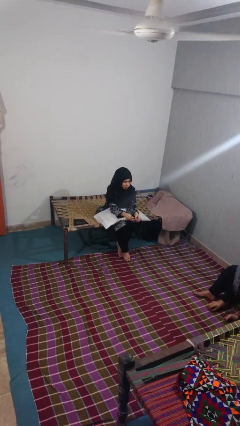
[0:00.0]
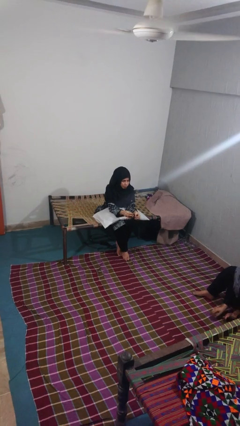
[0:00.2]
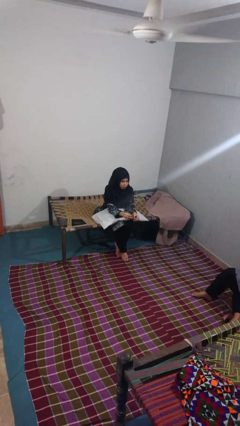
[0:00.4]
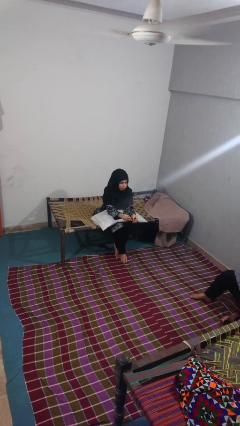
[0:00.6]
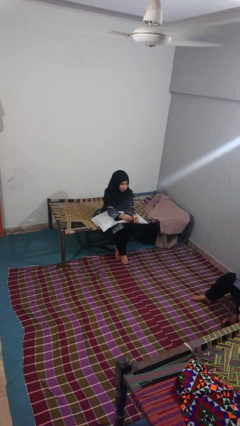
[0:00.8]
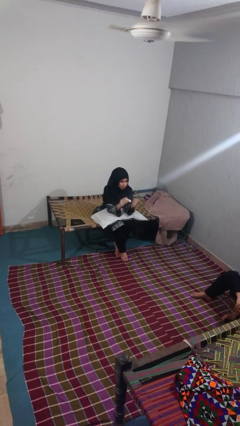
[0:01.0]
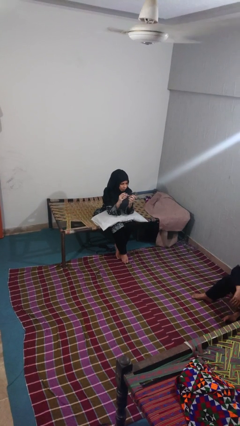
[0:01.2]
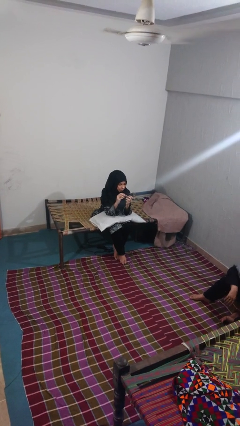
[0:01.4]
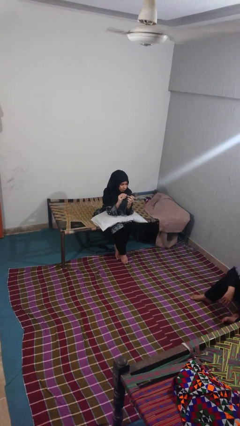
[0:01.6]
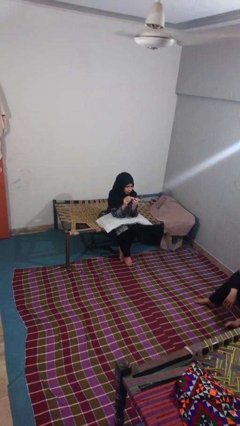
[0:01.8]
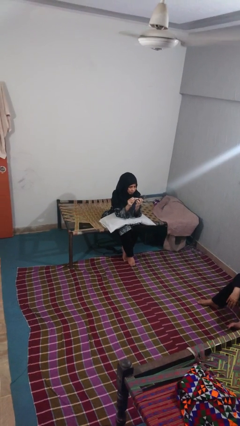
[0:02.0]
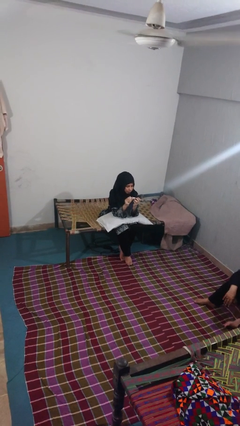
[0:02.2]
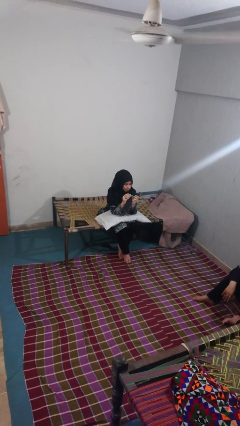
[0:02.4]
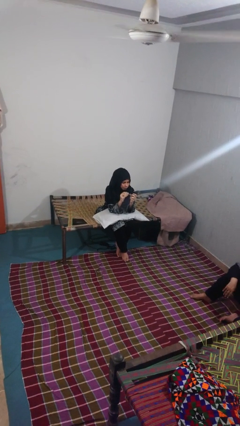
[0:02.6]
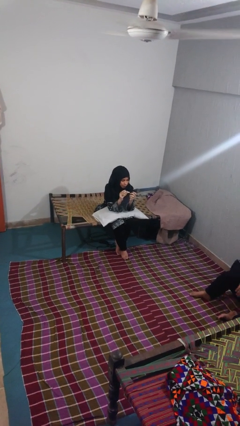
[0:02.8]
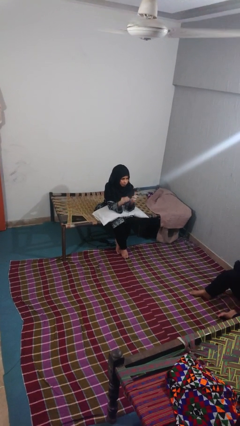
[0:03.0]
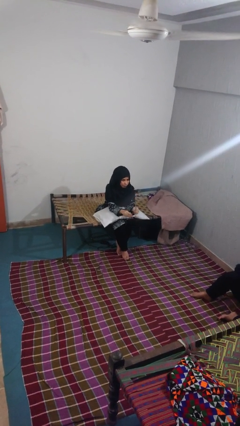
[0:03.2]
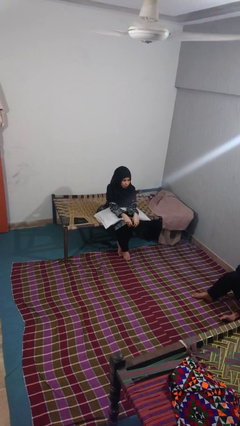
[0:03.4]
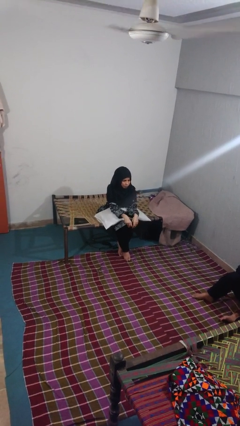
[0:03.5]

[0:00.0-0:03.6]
person clips fingernails

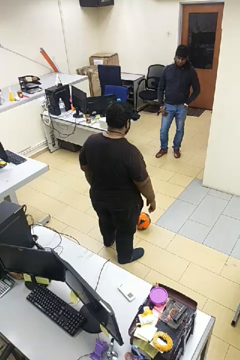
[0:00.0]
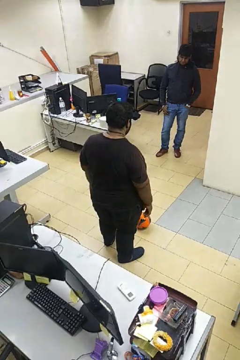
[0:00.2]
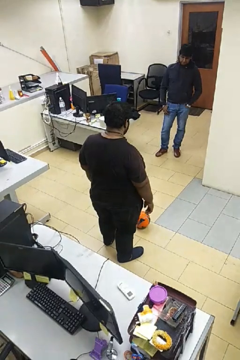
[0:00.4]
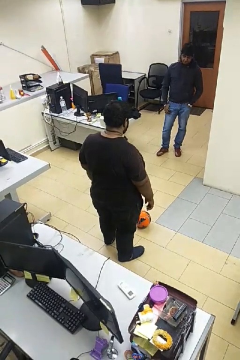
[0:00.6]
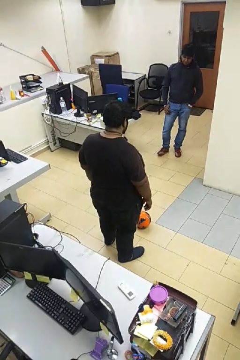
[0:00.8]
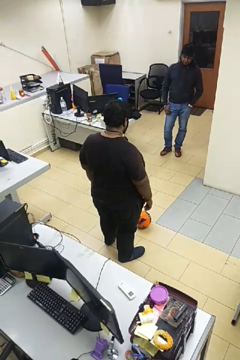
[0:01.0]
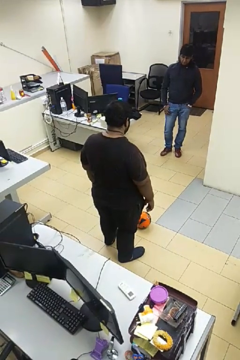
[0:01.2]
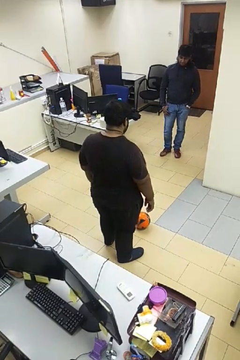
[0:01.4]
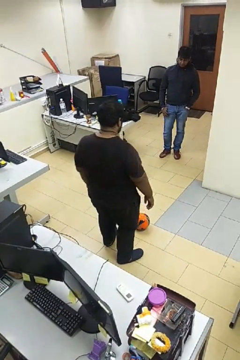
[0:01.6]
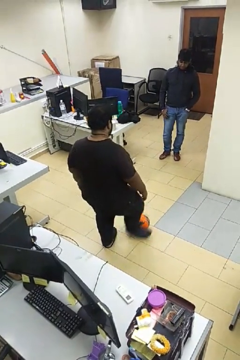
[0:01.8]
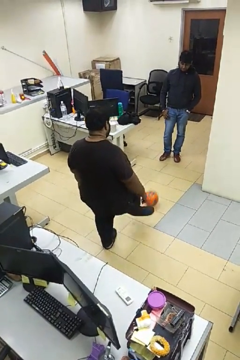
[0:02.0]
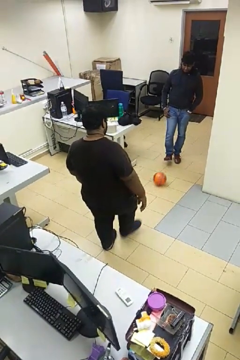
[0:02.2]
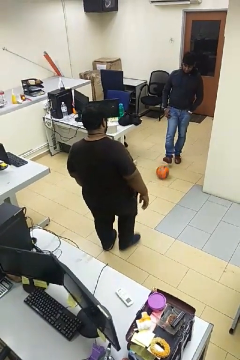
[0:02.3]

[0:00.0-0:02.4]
person kicks object to person

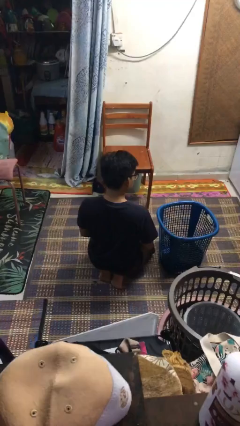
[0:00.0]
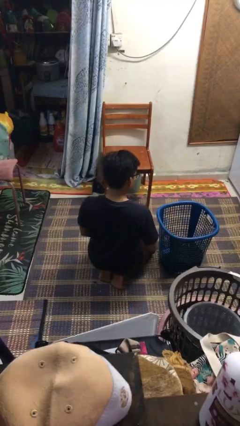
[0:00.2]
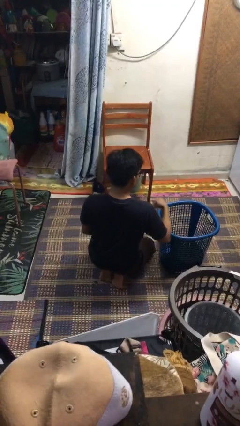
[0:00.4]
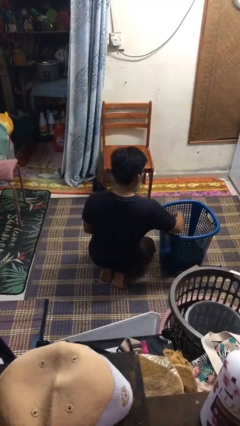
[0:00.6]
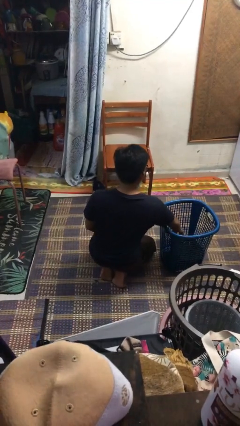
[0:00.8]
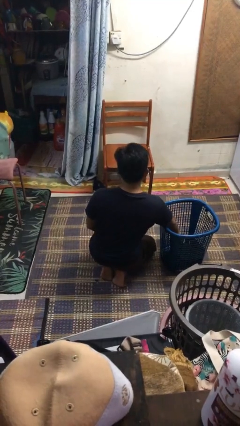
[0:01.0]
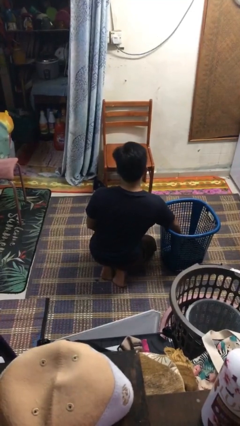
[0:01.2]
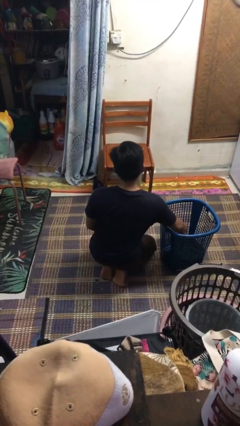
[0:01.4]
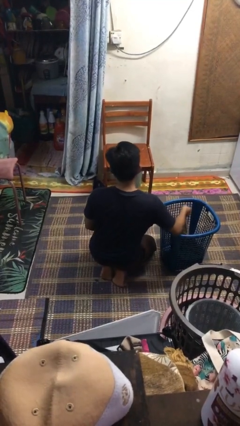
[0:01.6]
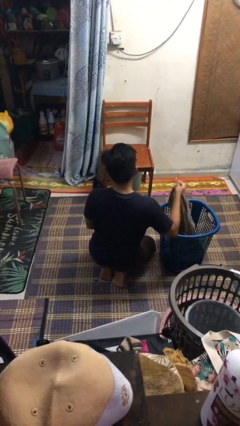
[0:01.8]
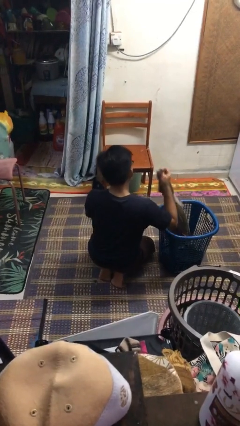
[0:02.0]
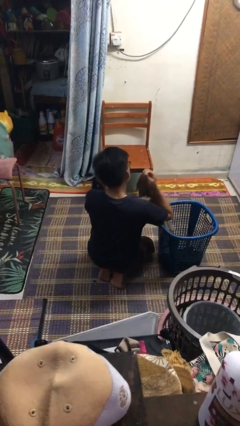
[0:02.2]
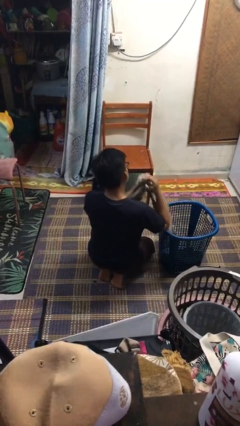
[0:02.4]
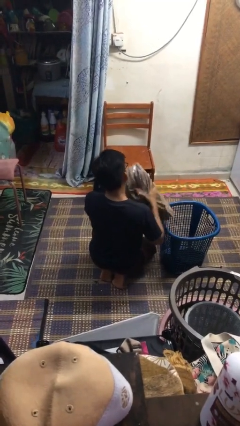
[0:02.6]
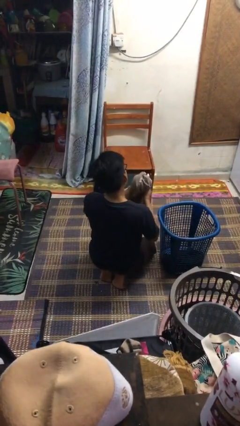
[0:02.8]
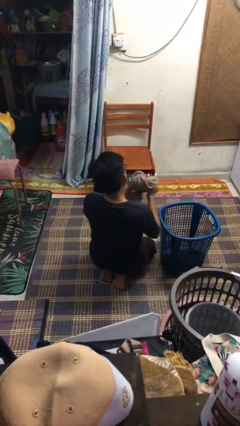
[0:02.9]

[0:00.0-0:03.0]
person takes object from basket

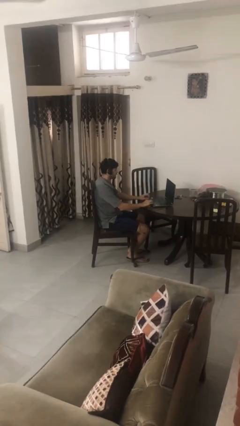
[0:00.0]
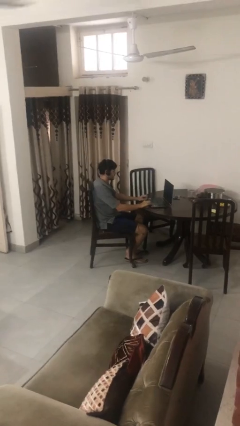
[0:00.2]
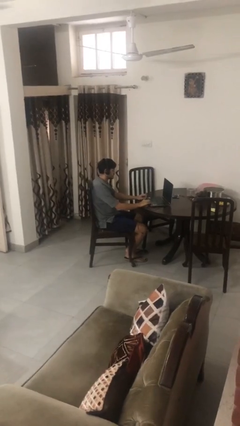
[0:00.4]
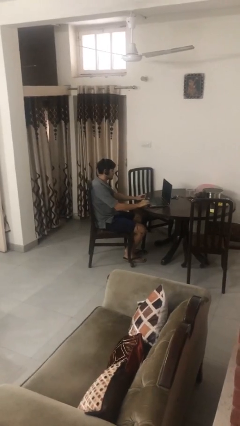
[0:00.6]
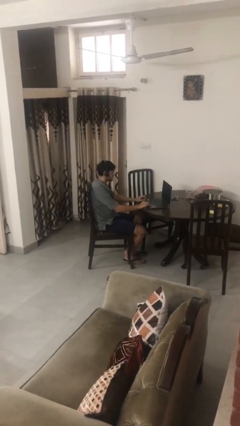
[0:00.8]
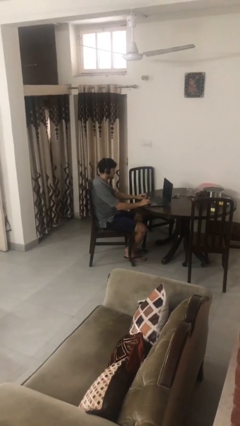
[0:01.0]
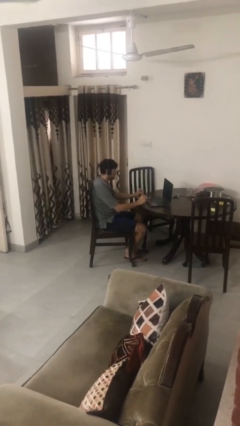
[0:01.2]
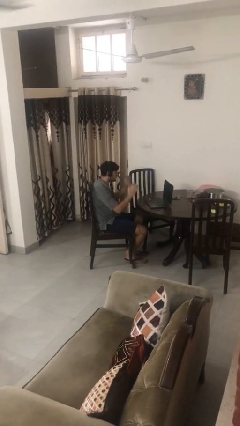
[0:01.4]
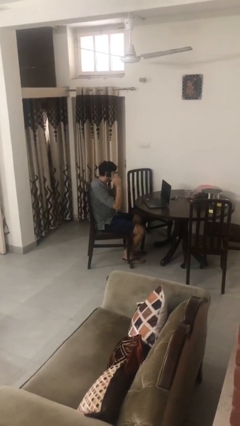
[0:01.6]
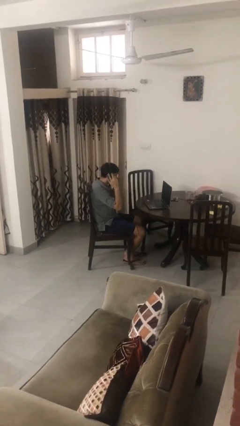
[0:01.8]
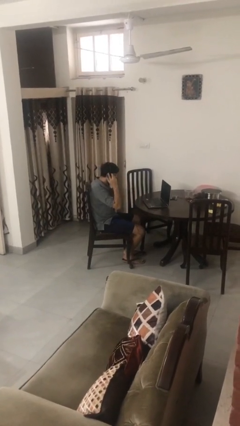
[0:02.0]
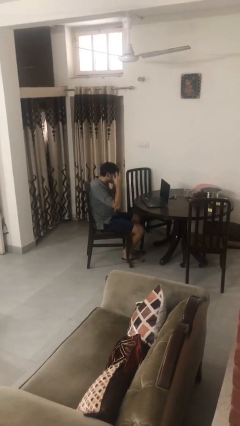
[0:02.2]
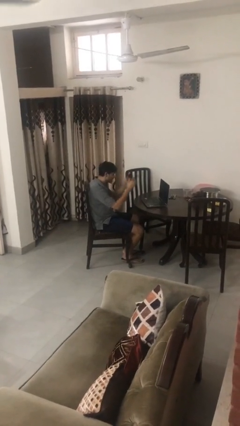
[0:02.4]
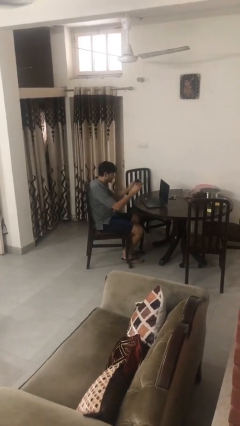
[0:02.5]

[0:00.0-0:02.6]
person takes off headphones

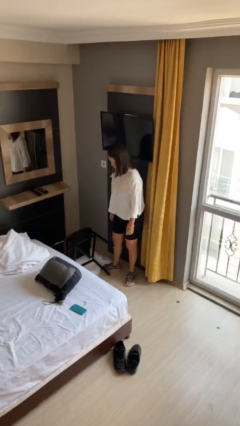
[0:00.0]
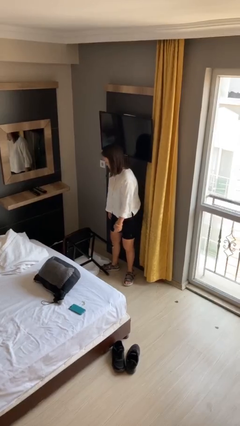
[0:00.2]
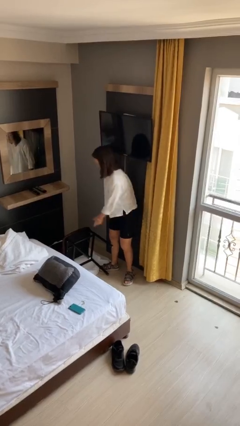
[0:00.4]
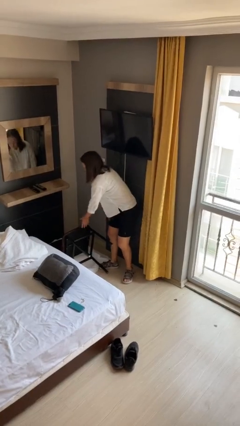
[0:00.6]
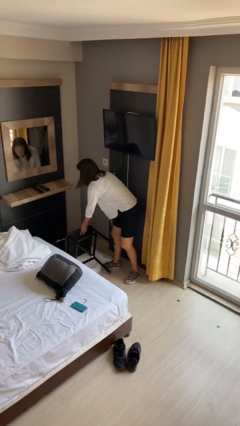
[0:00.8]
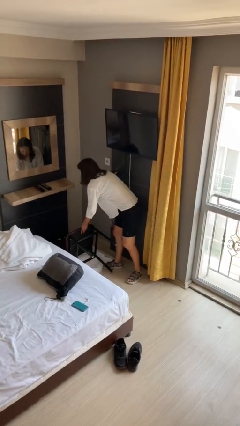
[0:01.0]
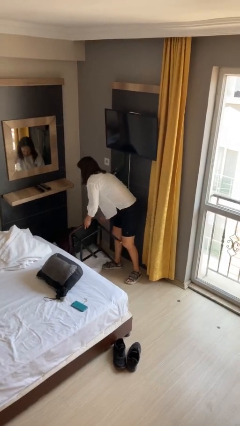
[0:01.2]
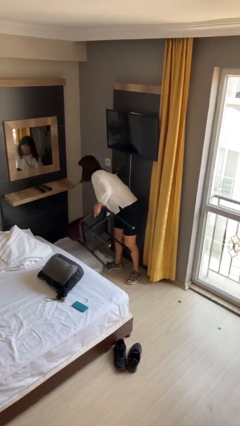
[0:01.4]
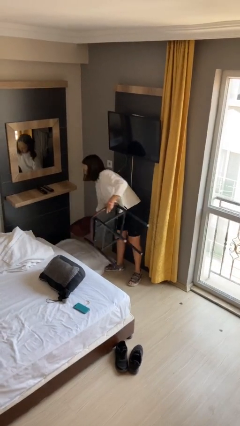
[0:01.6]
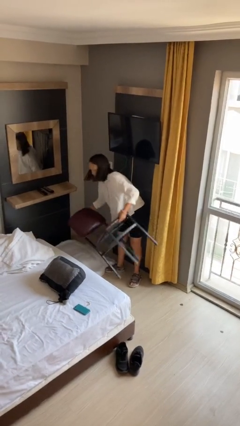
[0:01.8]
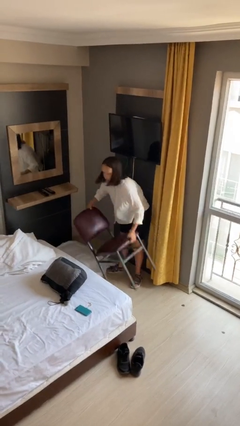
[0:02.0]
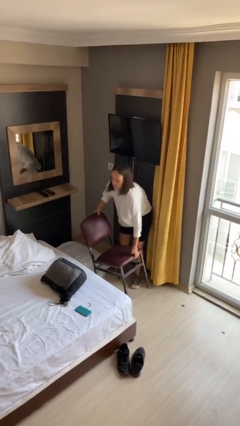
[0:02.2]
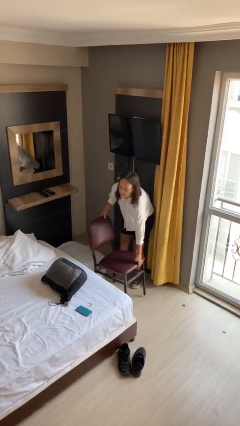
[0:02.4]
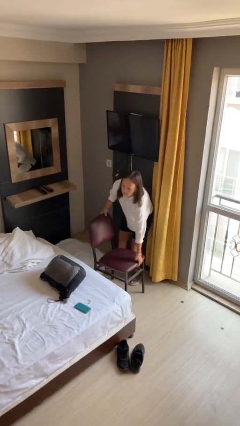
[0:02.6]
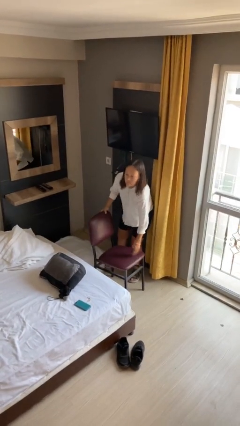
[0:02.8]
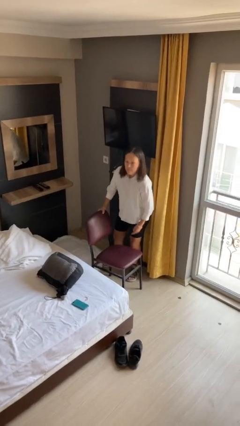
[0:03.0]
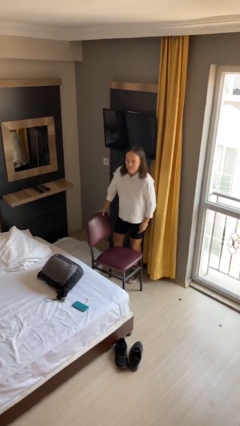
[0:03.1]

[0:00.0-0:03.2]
person sets upright furniture

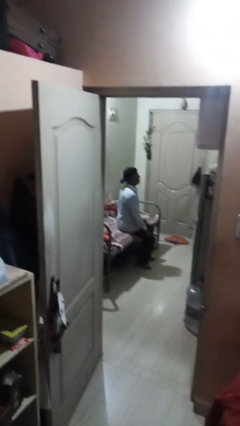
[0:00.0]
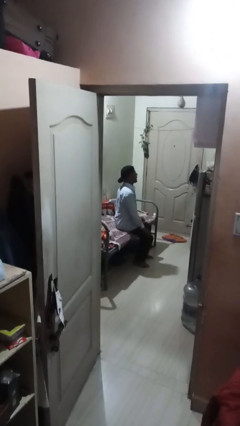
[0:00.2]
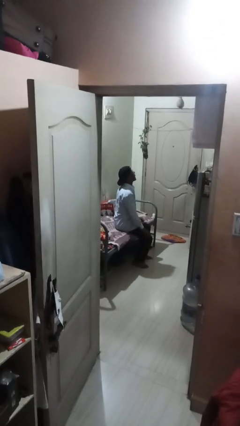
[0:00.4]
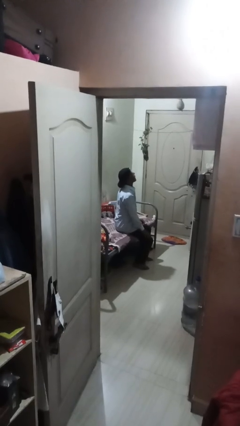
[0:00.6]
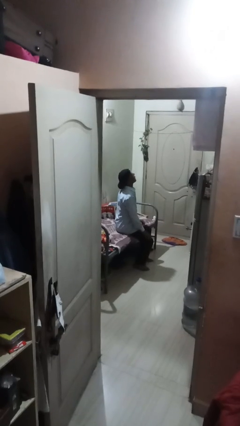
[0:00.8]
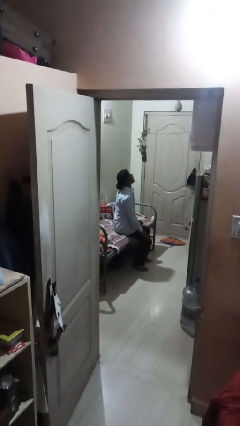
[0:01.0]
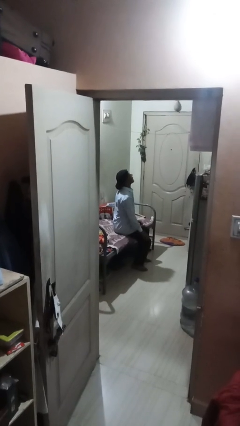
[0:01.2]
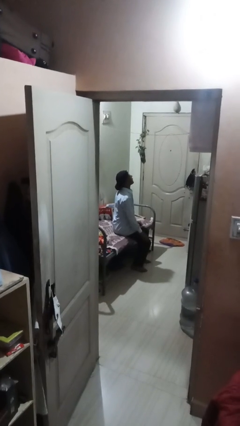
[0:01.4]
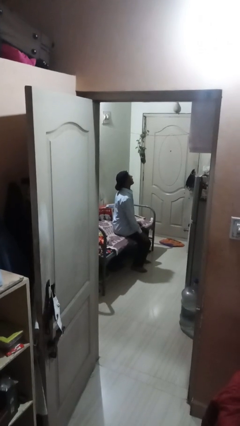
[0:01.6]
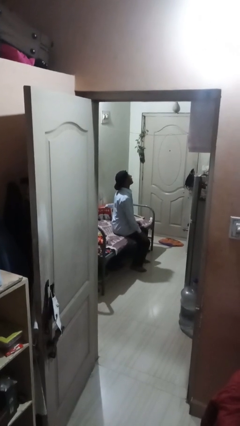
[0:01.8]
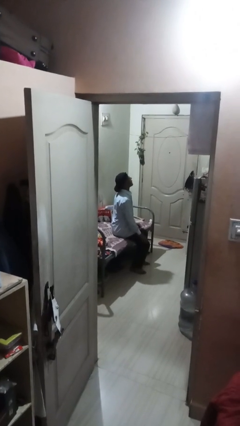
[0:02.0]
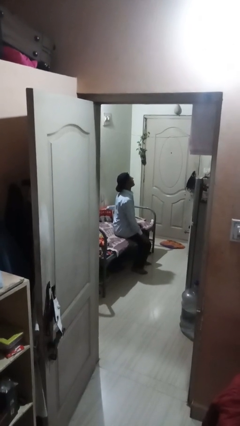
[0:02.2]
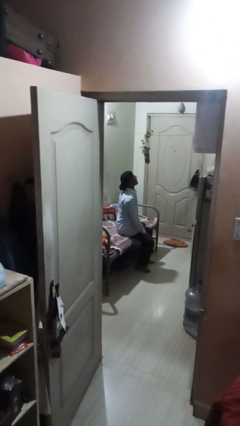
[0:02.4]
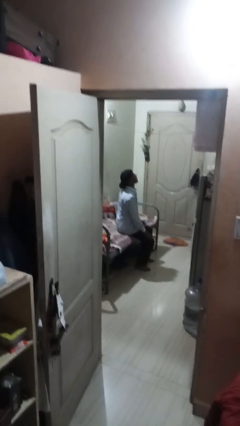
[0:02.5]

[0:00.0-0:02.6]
person sticks out tongue

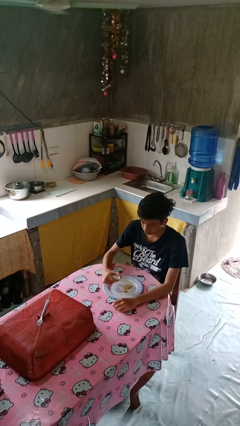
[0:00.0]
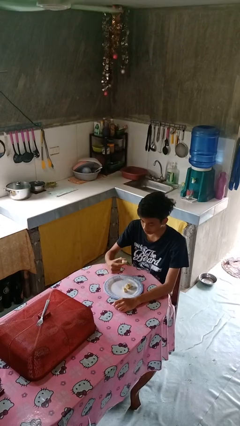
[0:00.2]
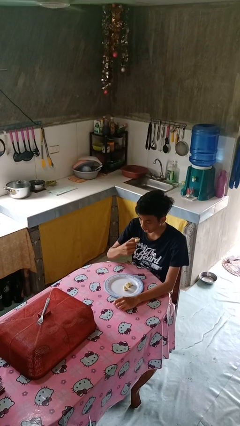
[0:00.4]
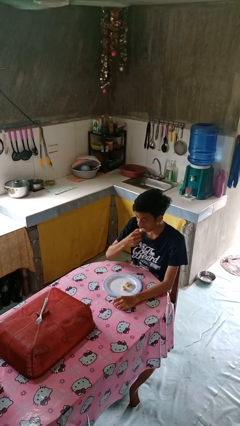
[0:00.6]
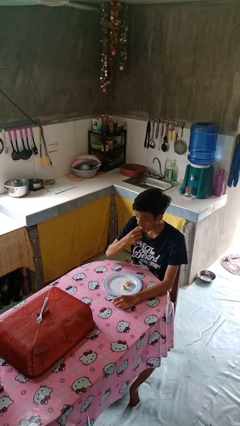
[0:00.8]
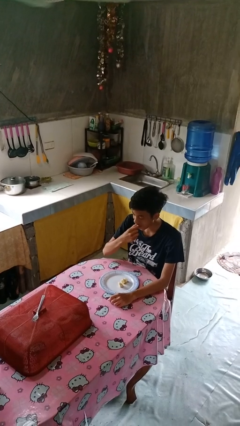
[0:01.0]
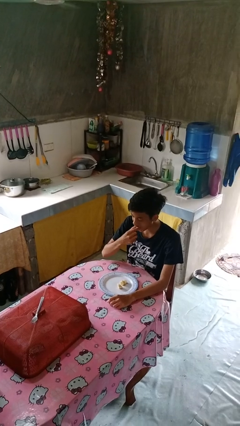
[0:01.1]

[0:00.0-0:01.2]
person eats with hands
